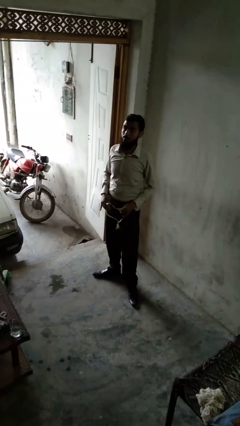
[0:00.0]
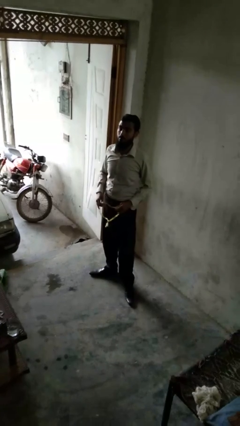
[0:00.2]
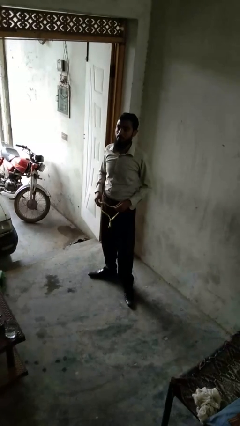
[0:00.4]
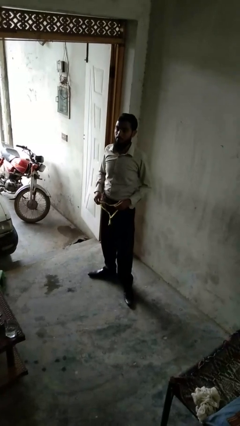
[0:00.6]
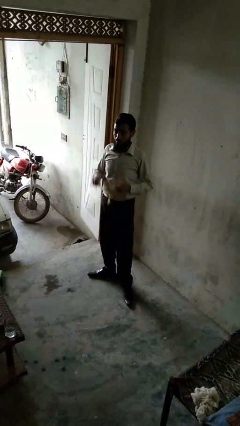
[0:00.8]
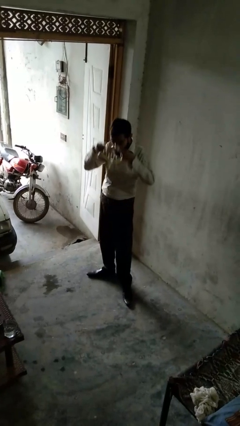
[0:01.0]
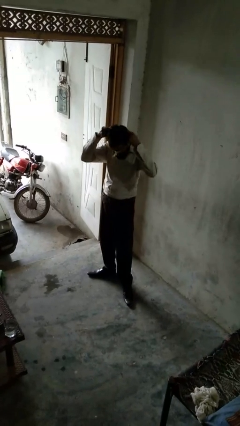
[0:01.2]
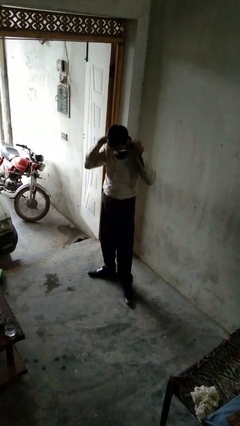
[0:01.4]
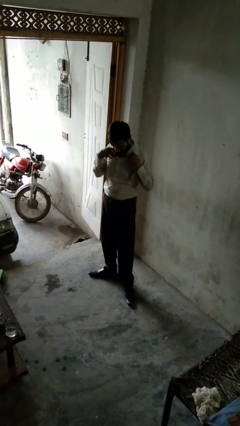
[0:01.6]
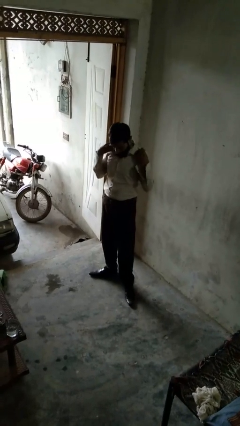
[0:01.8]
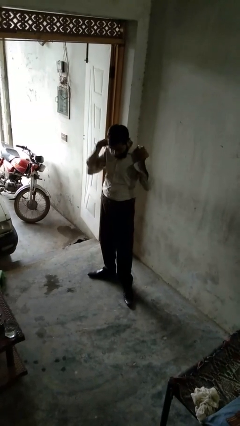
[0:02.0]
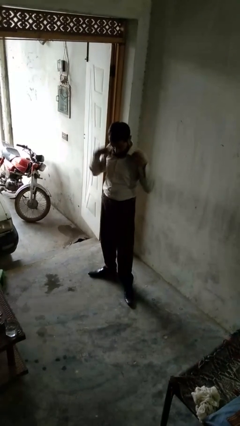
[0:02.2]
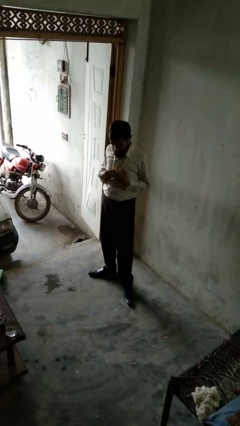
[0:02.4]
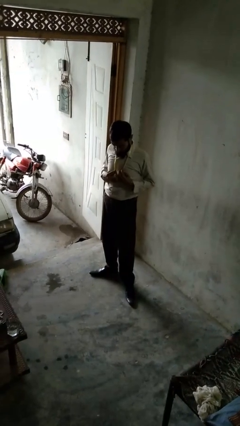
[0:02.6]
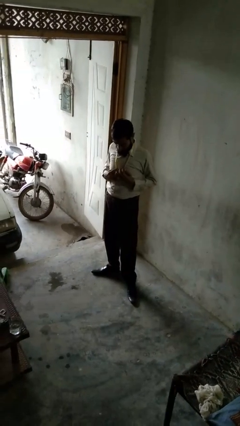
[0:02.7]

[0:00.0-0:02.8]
person puts on necklace

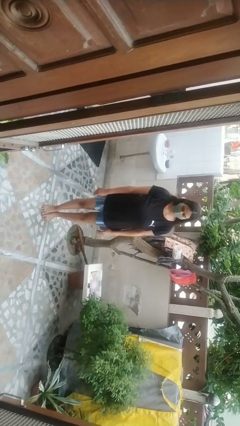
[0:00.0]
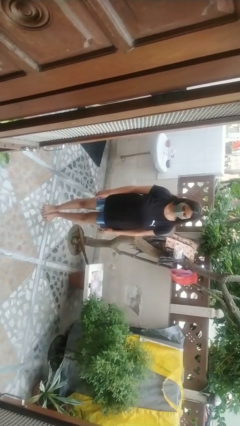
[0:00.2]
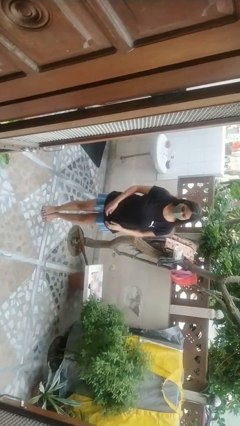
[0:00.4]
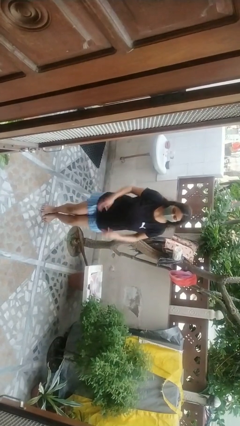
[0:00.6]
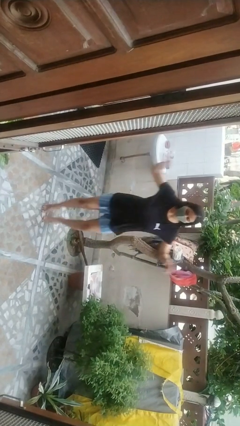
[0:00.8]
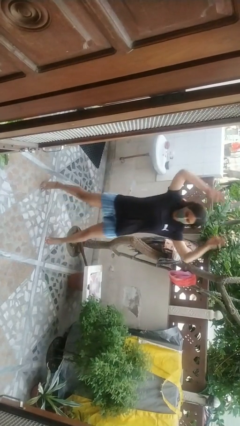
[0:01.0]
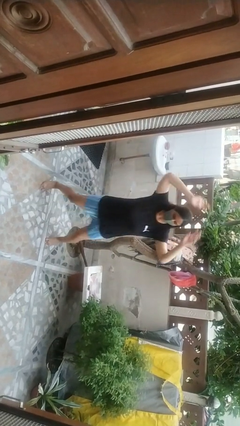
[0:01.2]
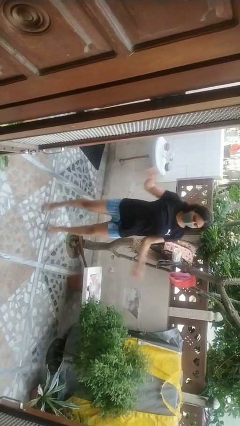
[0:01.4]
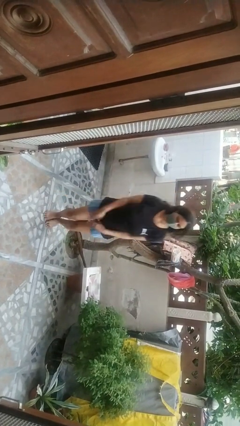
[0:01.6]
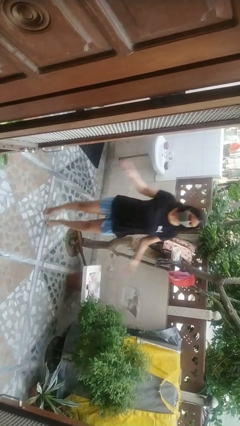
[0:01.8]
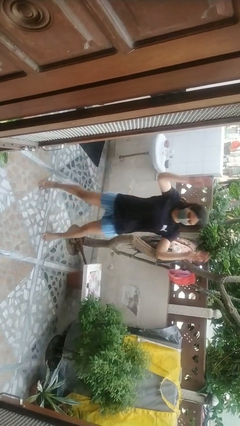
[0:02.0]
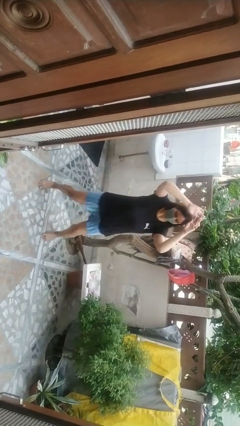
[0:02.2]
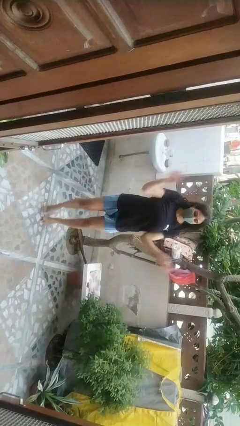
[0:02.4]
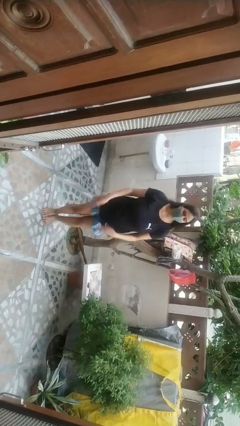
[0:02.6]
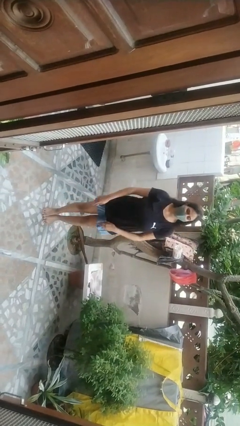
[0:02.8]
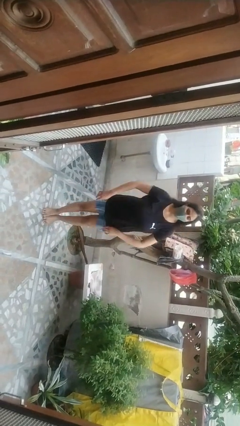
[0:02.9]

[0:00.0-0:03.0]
person exercises with jumping jacks

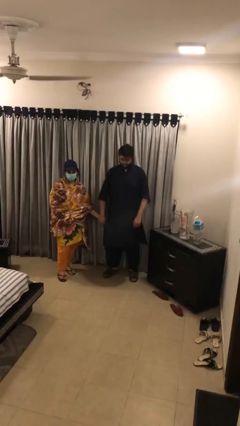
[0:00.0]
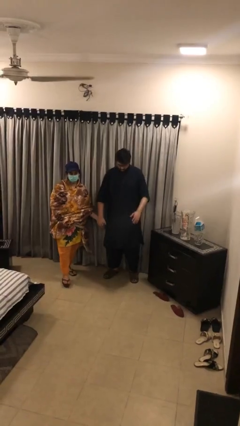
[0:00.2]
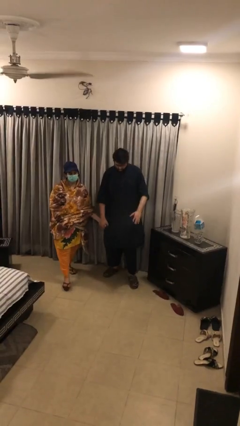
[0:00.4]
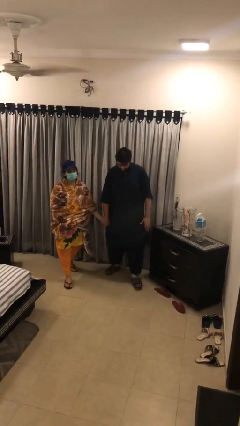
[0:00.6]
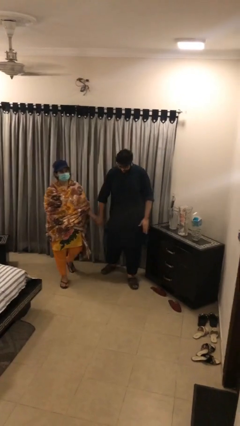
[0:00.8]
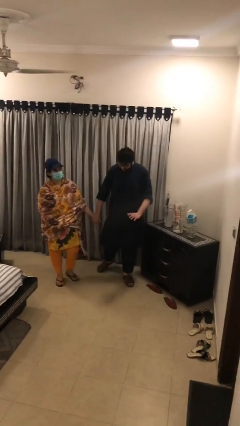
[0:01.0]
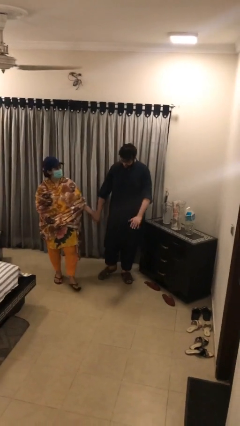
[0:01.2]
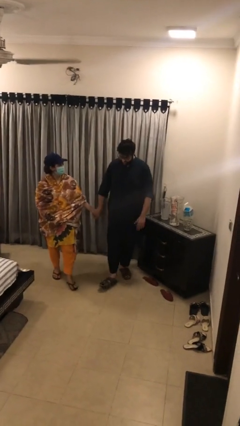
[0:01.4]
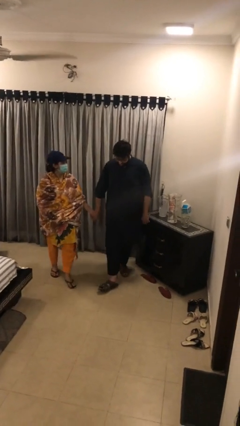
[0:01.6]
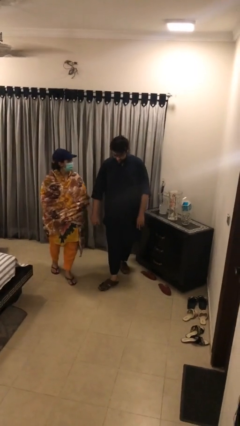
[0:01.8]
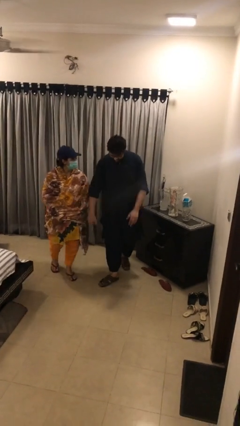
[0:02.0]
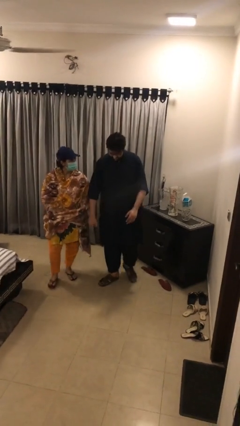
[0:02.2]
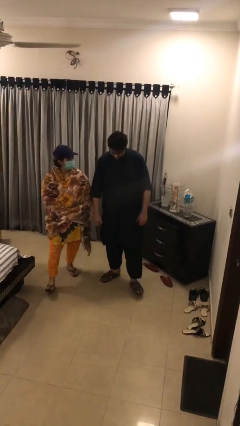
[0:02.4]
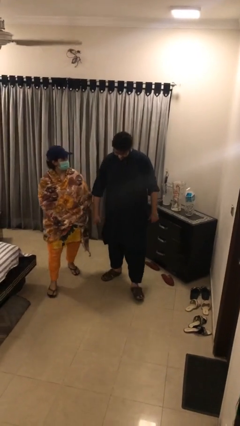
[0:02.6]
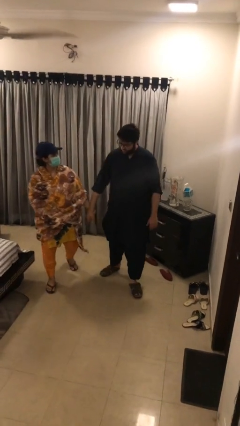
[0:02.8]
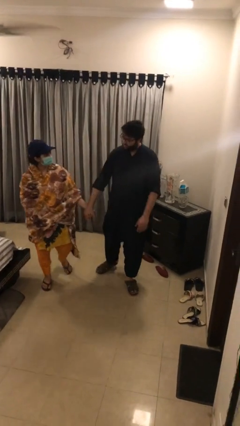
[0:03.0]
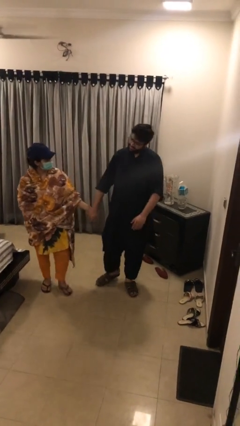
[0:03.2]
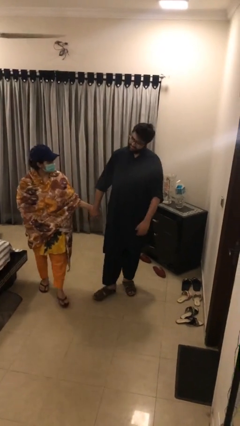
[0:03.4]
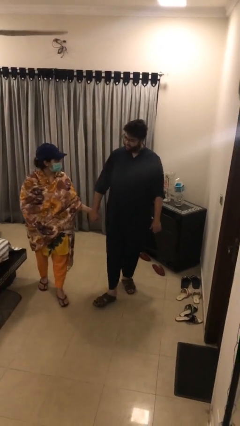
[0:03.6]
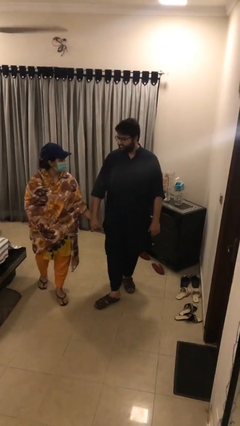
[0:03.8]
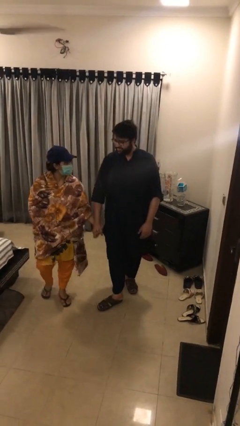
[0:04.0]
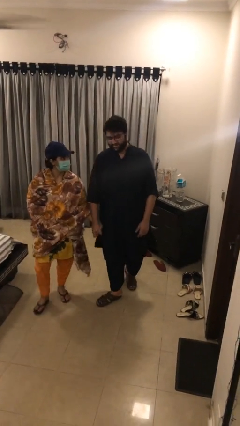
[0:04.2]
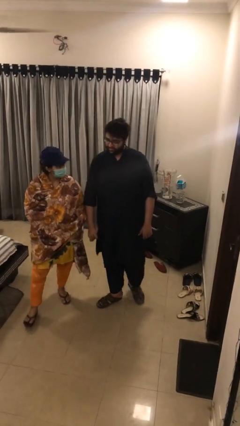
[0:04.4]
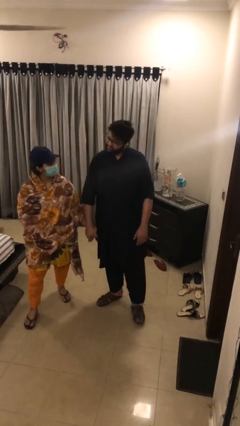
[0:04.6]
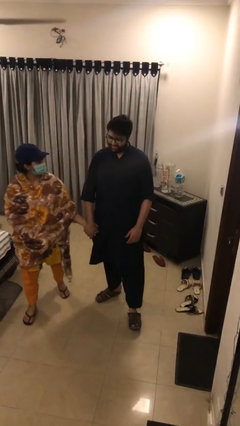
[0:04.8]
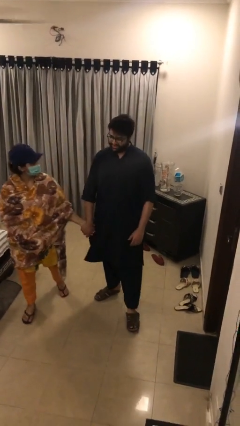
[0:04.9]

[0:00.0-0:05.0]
person holds hand

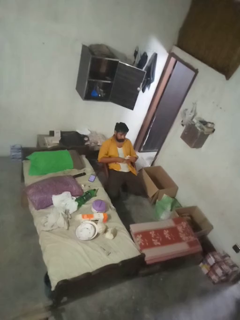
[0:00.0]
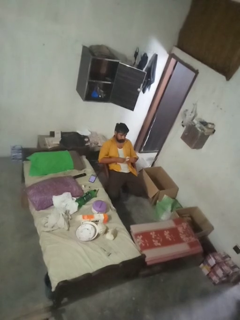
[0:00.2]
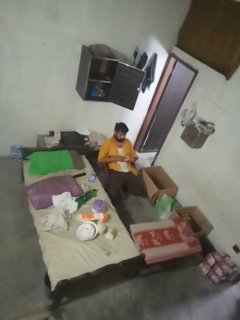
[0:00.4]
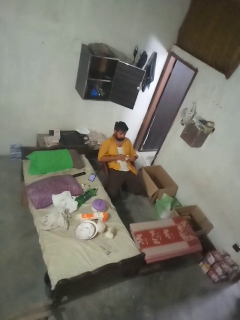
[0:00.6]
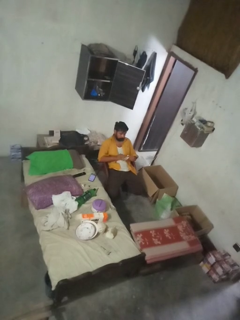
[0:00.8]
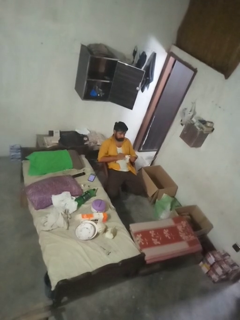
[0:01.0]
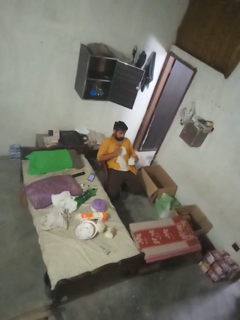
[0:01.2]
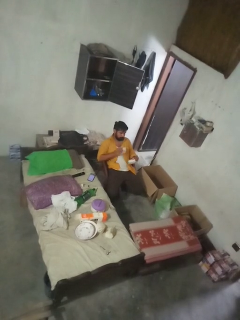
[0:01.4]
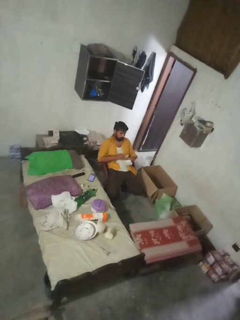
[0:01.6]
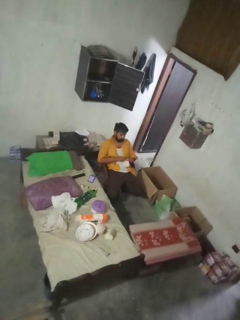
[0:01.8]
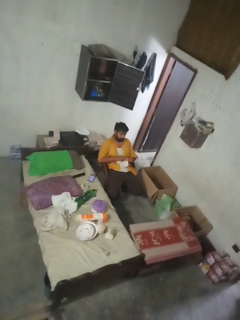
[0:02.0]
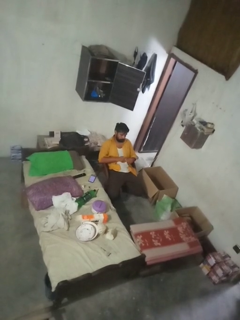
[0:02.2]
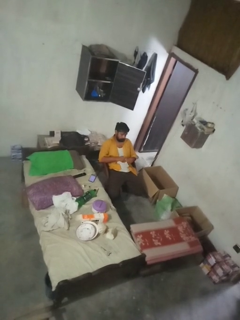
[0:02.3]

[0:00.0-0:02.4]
person tears paper

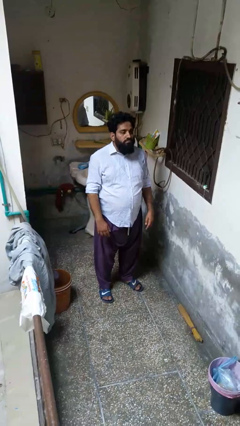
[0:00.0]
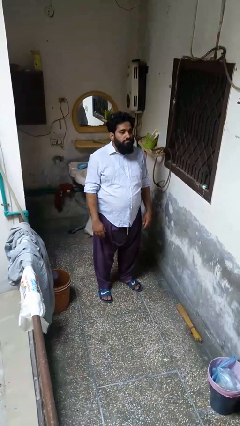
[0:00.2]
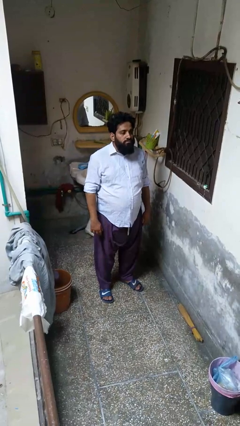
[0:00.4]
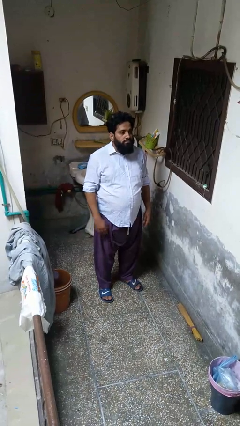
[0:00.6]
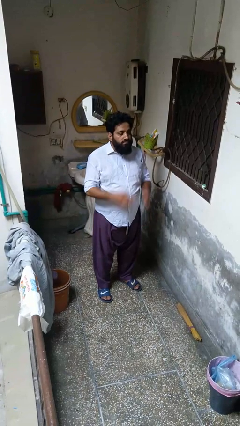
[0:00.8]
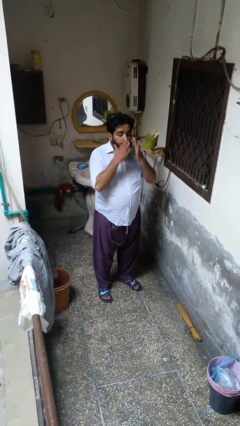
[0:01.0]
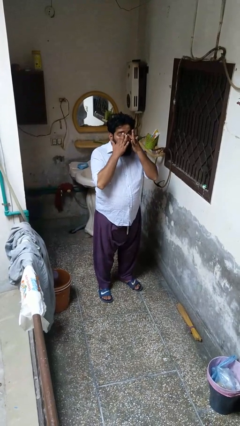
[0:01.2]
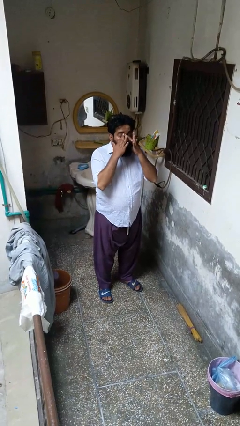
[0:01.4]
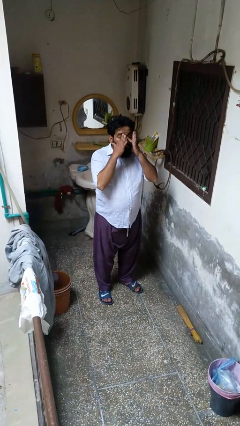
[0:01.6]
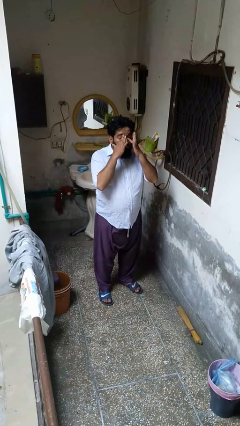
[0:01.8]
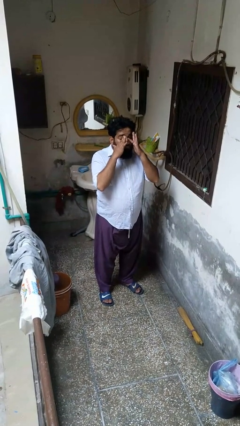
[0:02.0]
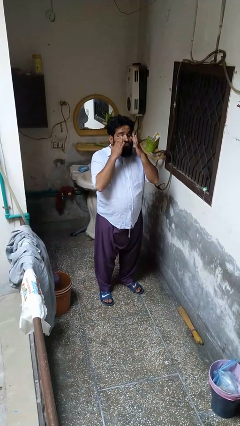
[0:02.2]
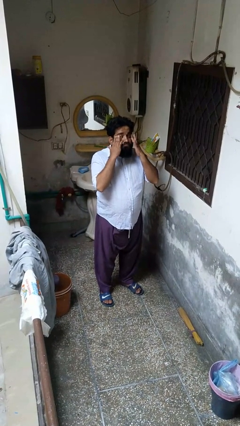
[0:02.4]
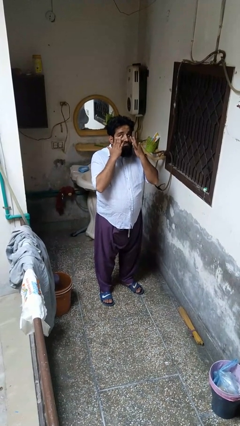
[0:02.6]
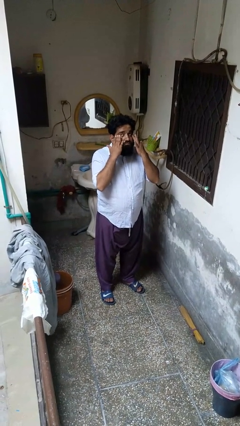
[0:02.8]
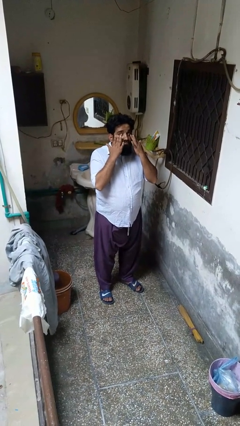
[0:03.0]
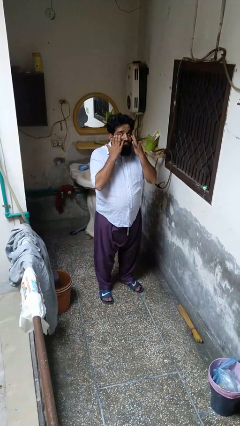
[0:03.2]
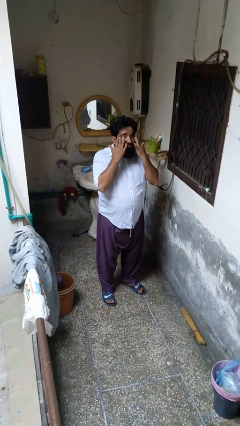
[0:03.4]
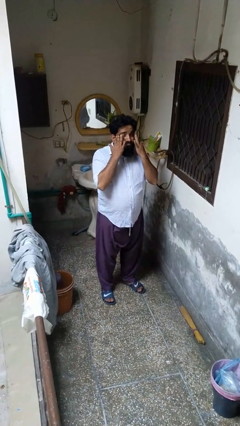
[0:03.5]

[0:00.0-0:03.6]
person rubs eyes

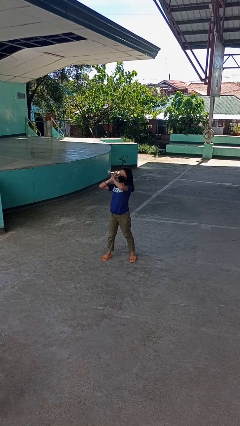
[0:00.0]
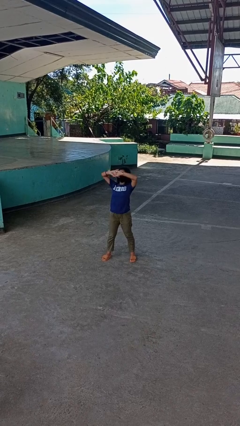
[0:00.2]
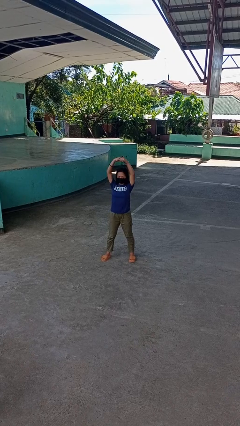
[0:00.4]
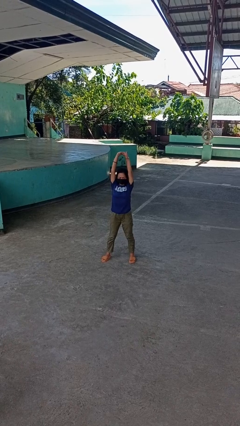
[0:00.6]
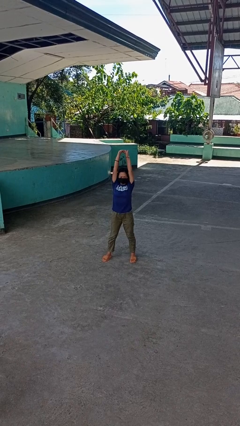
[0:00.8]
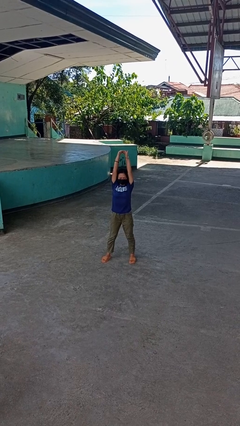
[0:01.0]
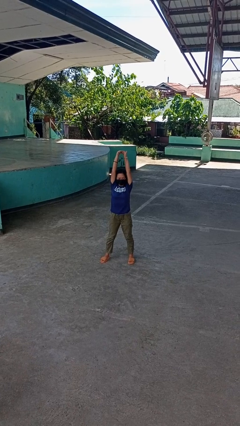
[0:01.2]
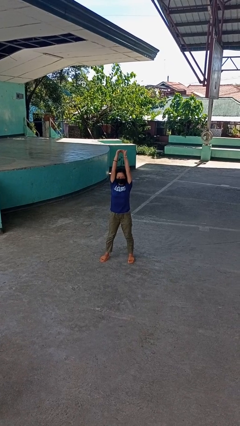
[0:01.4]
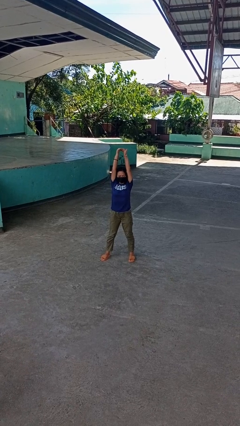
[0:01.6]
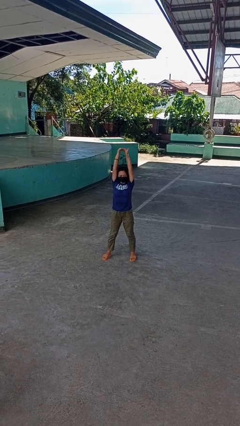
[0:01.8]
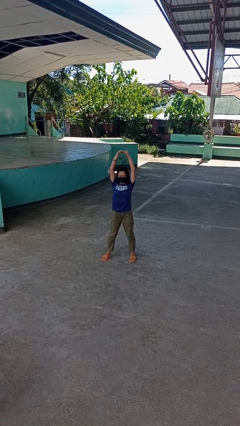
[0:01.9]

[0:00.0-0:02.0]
person stretches arms over head
